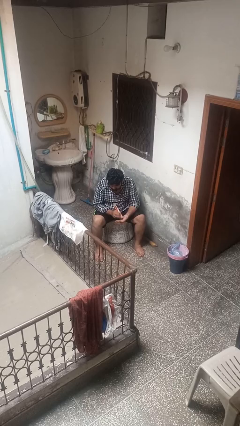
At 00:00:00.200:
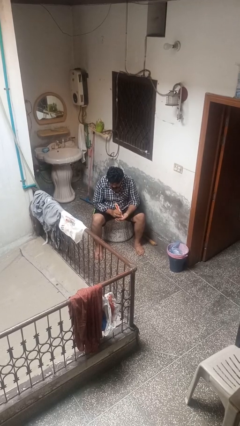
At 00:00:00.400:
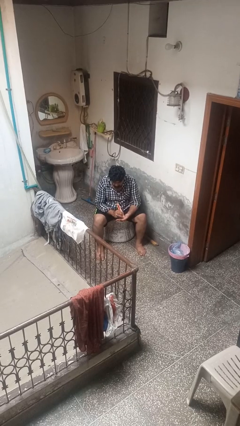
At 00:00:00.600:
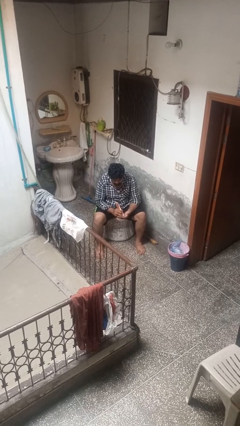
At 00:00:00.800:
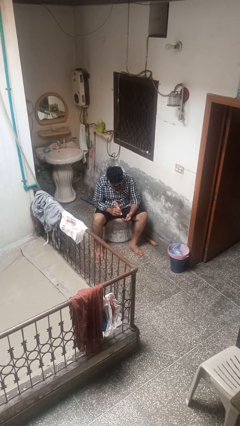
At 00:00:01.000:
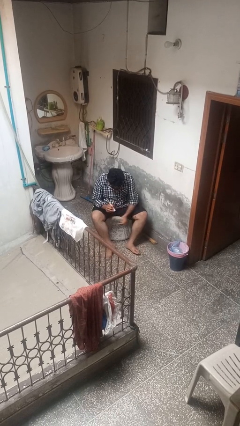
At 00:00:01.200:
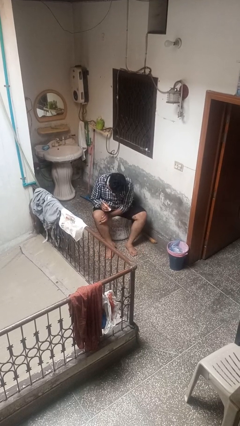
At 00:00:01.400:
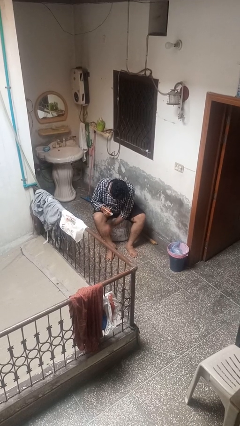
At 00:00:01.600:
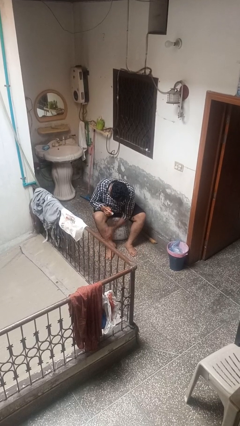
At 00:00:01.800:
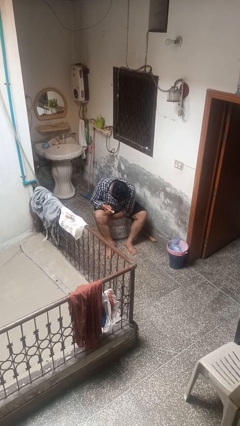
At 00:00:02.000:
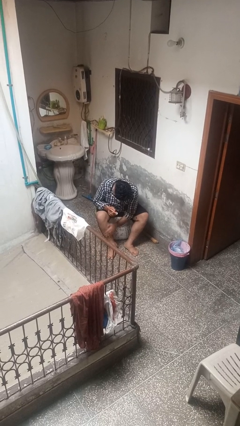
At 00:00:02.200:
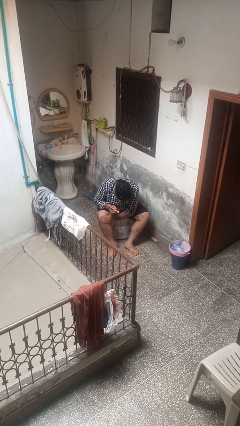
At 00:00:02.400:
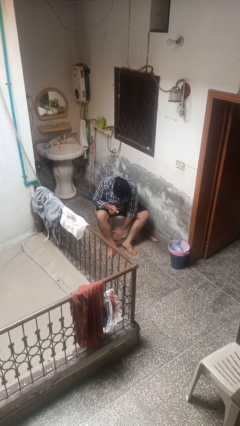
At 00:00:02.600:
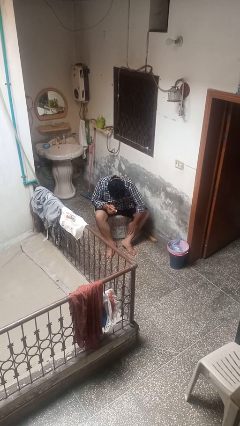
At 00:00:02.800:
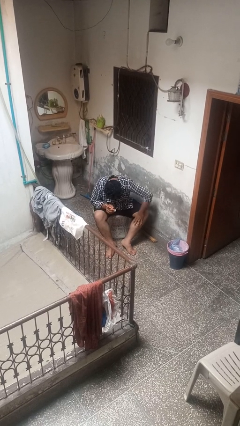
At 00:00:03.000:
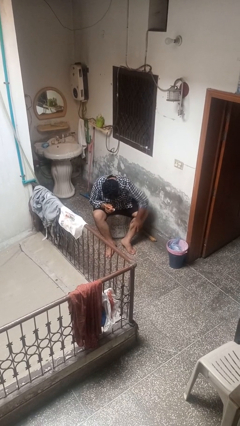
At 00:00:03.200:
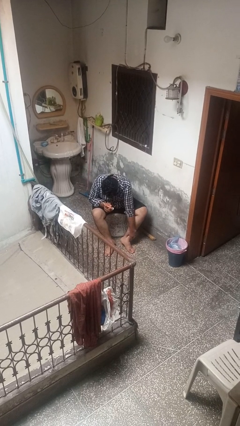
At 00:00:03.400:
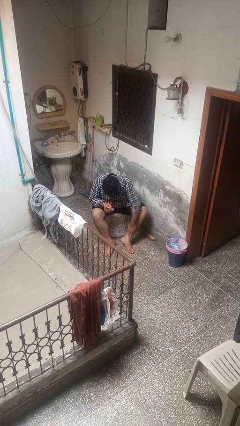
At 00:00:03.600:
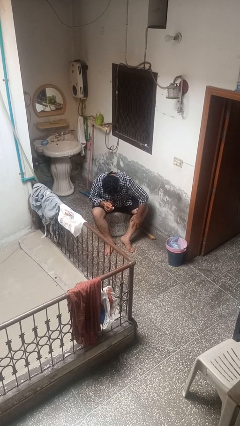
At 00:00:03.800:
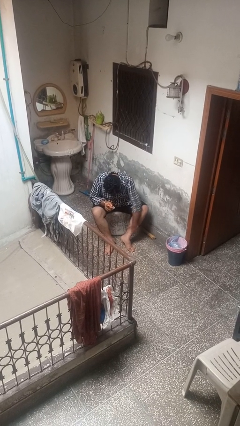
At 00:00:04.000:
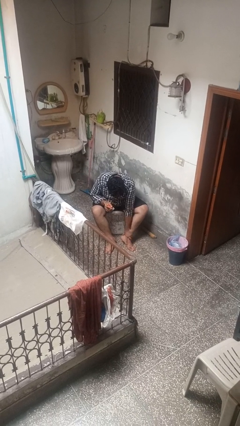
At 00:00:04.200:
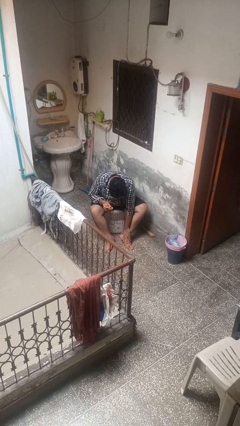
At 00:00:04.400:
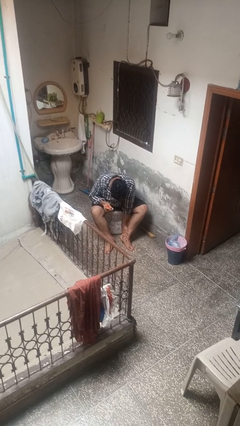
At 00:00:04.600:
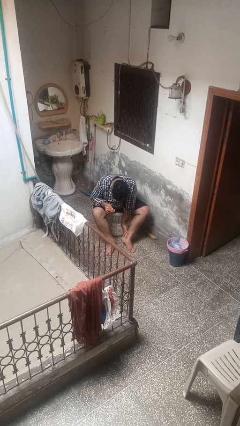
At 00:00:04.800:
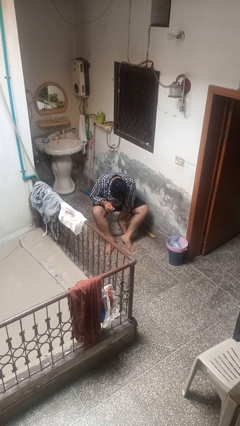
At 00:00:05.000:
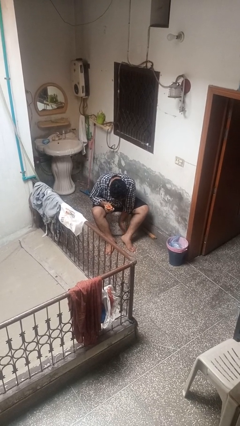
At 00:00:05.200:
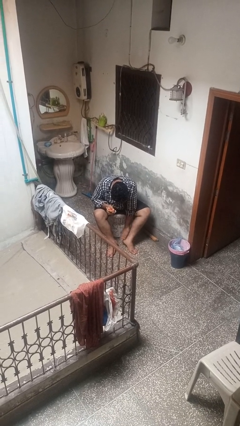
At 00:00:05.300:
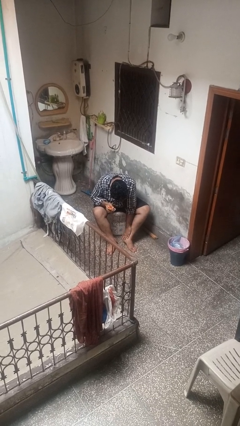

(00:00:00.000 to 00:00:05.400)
person applies sunscreen

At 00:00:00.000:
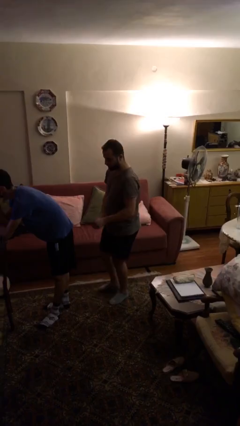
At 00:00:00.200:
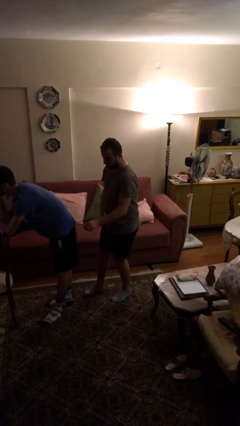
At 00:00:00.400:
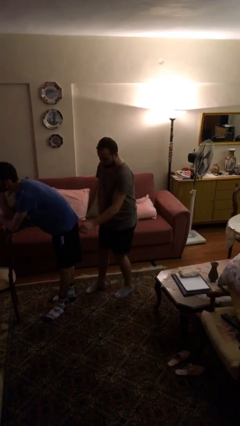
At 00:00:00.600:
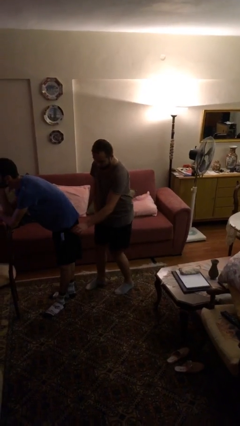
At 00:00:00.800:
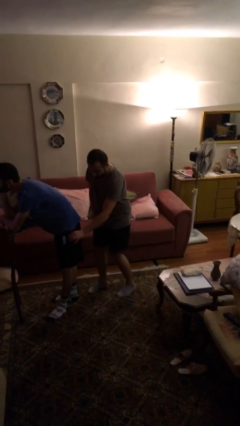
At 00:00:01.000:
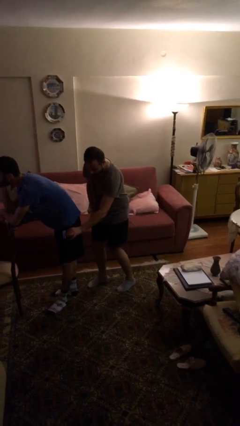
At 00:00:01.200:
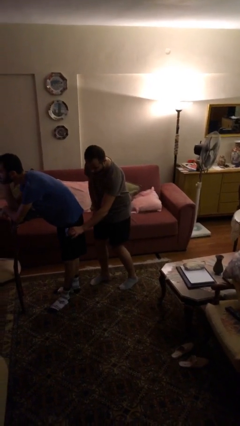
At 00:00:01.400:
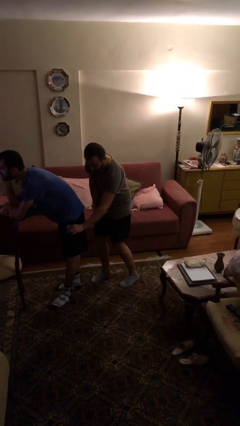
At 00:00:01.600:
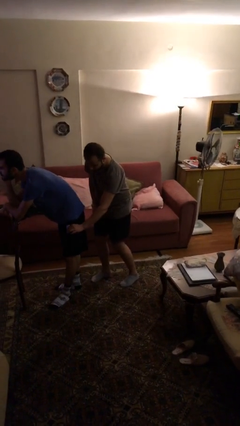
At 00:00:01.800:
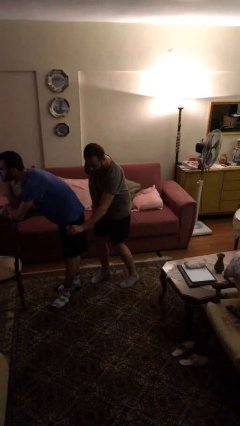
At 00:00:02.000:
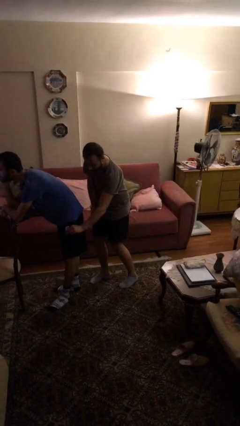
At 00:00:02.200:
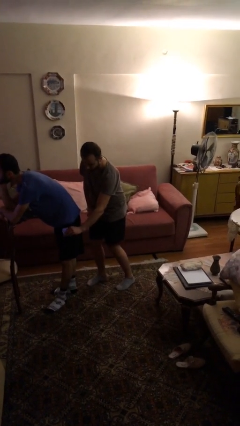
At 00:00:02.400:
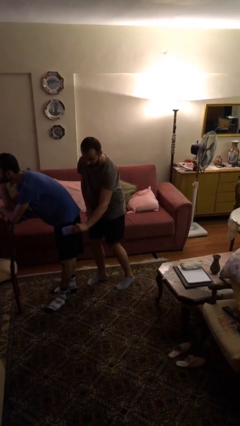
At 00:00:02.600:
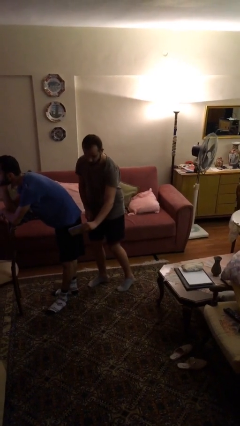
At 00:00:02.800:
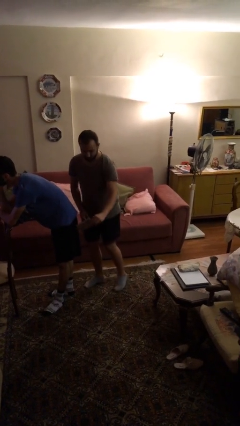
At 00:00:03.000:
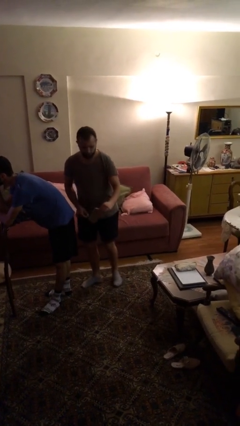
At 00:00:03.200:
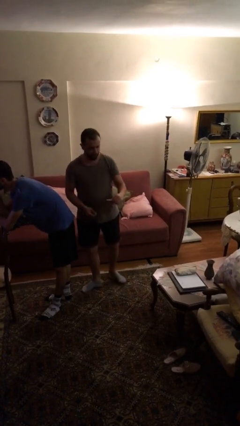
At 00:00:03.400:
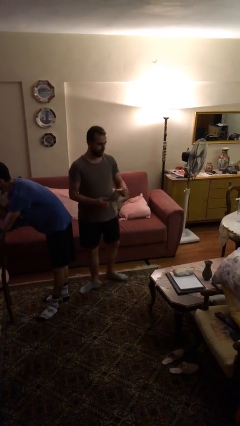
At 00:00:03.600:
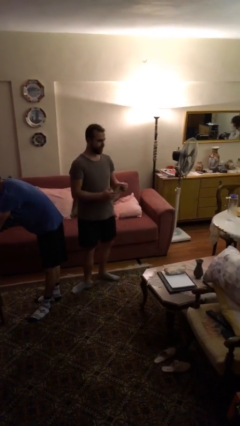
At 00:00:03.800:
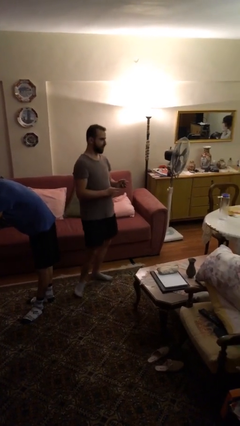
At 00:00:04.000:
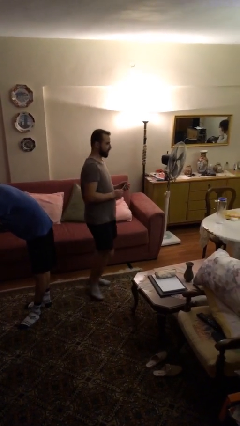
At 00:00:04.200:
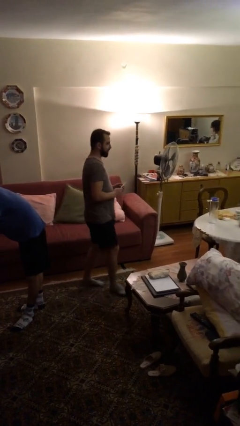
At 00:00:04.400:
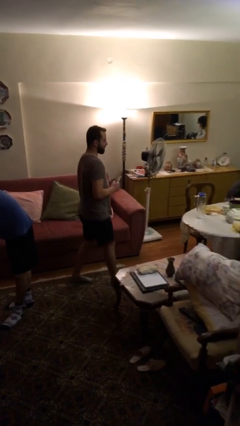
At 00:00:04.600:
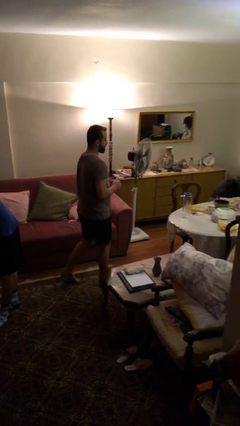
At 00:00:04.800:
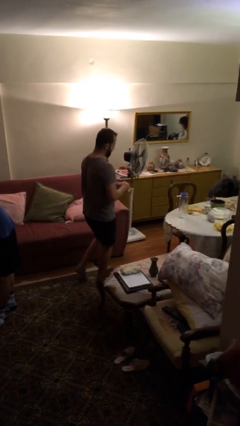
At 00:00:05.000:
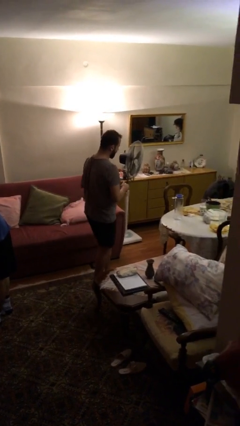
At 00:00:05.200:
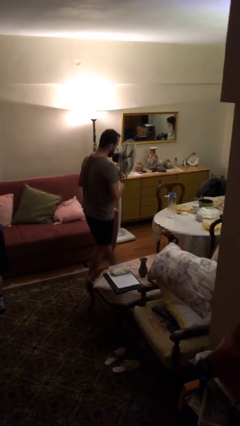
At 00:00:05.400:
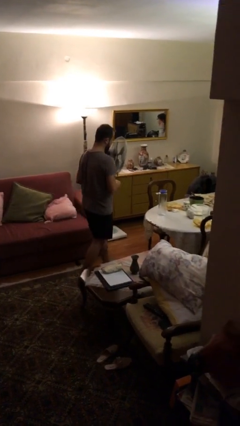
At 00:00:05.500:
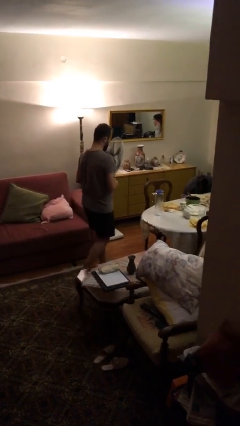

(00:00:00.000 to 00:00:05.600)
person steals object from person

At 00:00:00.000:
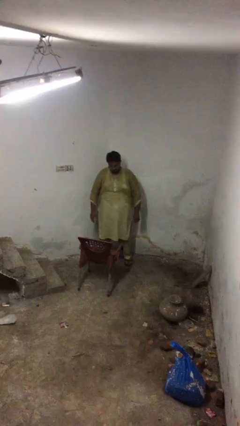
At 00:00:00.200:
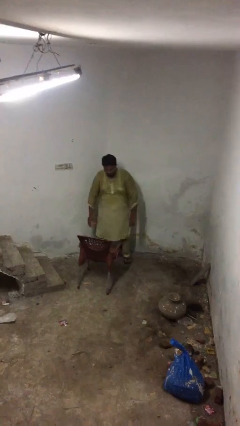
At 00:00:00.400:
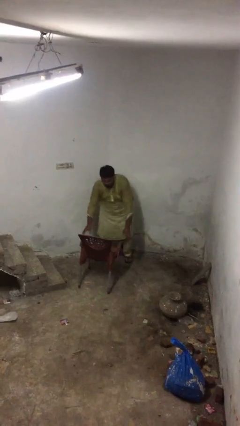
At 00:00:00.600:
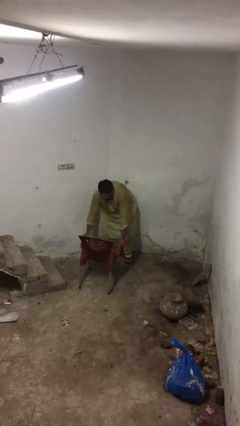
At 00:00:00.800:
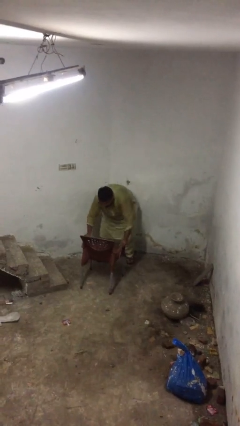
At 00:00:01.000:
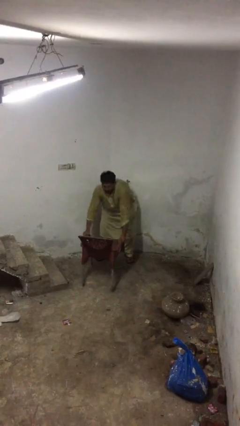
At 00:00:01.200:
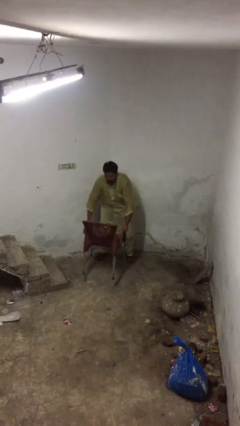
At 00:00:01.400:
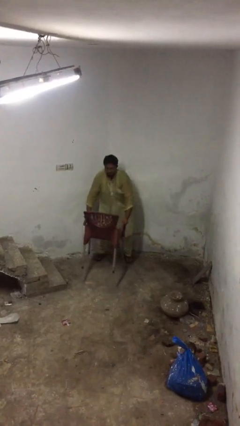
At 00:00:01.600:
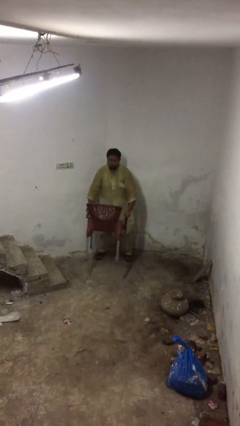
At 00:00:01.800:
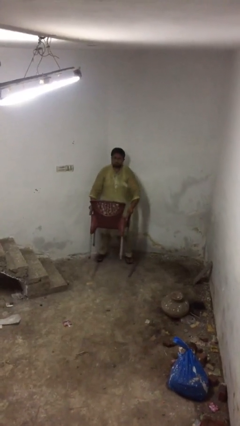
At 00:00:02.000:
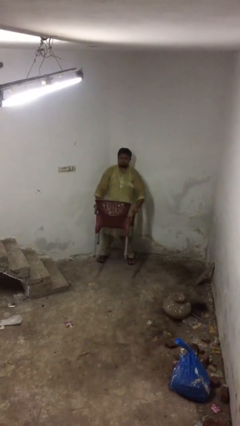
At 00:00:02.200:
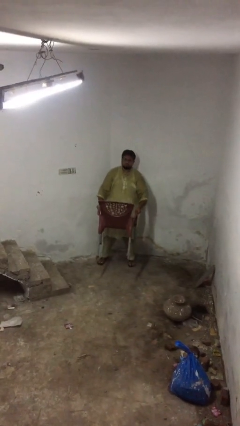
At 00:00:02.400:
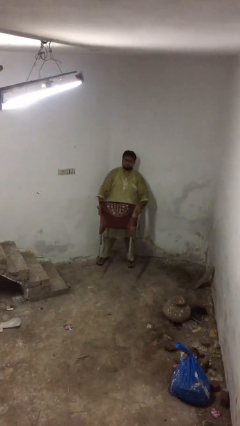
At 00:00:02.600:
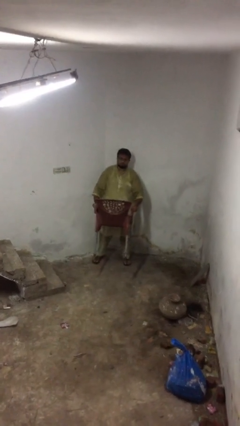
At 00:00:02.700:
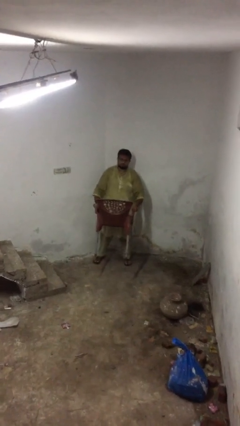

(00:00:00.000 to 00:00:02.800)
person picks up object from floor

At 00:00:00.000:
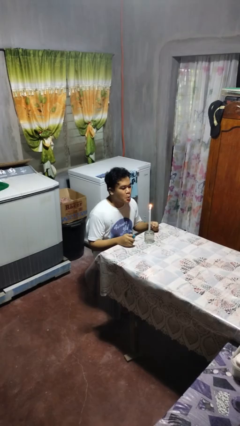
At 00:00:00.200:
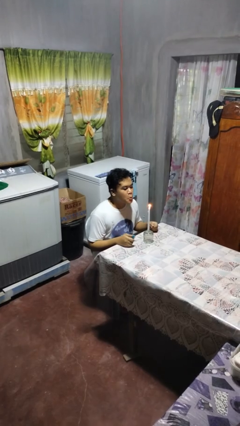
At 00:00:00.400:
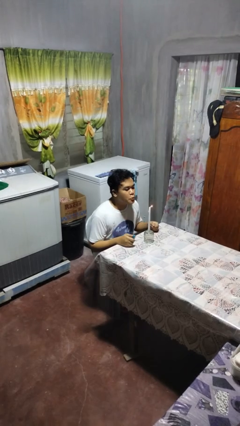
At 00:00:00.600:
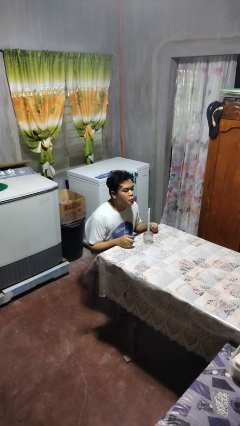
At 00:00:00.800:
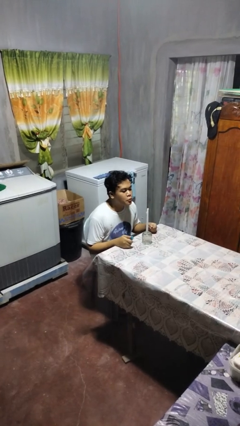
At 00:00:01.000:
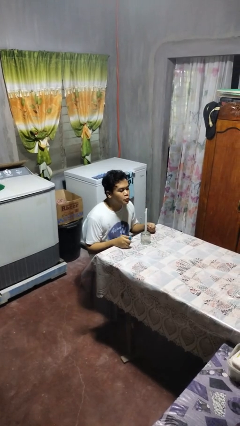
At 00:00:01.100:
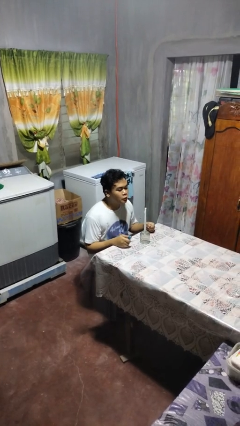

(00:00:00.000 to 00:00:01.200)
person extinguishes candle

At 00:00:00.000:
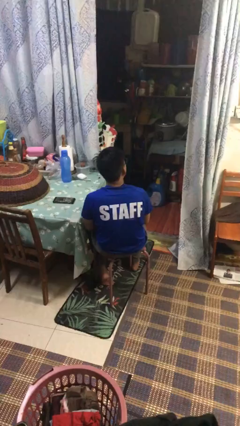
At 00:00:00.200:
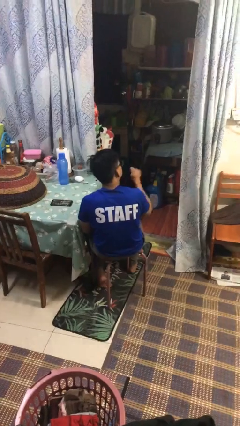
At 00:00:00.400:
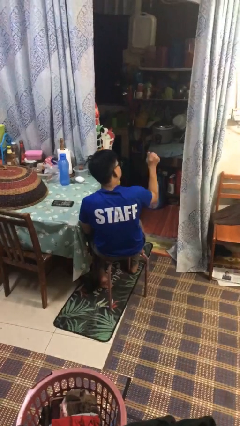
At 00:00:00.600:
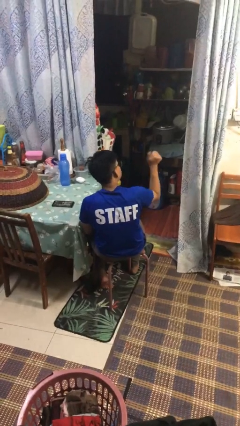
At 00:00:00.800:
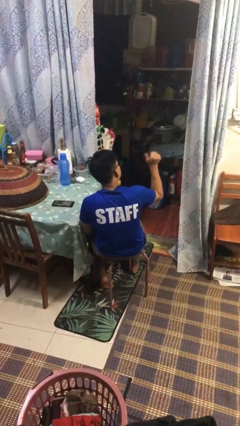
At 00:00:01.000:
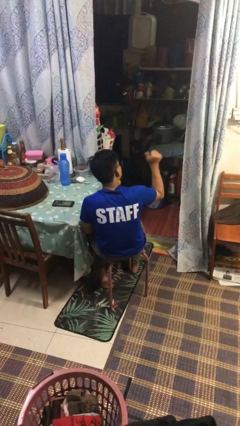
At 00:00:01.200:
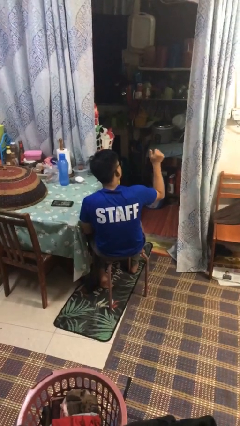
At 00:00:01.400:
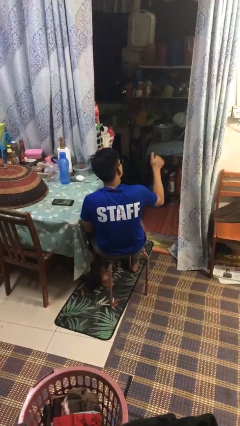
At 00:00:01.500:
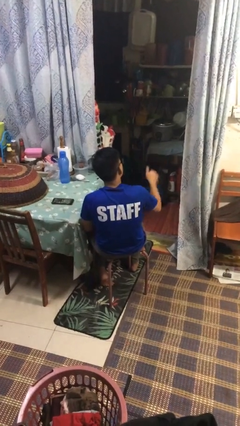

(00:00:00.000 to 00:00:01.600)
person gestures thumbs up

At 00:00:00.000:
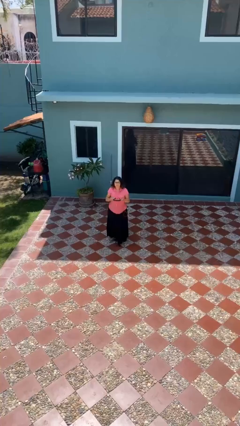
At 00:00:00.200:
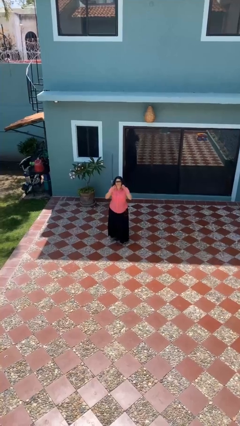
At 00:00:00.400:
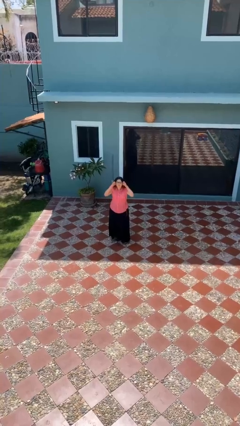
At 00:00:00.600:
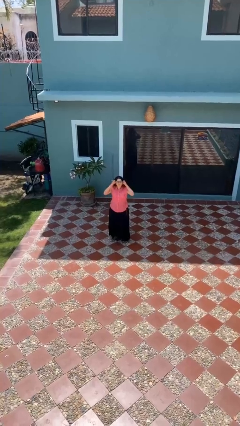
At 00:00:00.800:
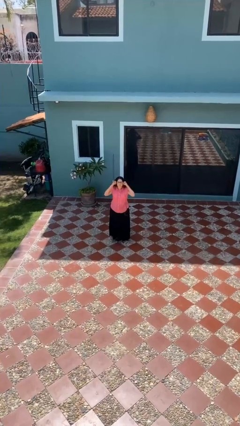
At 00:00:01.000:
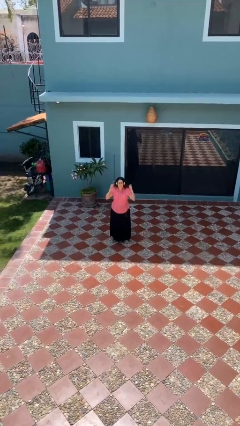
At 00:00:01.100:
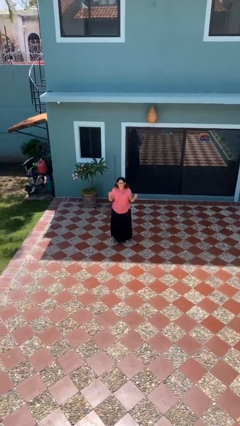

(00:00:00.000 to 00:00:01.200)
person puts on headphones
